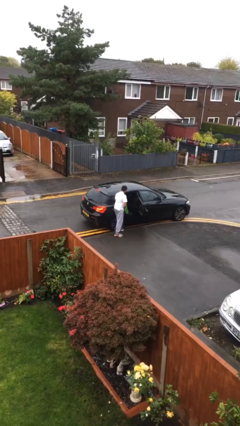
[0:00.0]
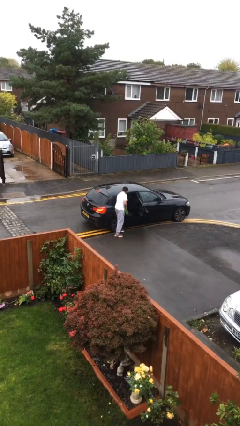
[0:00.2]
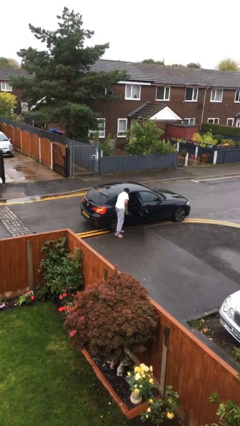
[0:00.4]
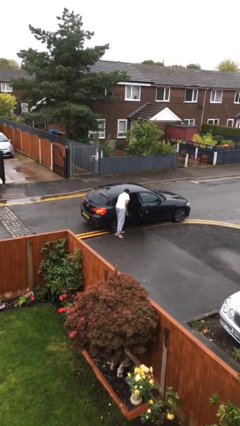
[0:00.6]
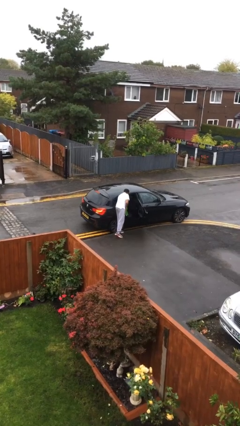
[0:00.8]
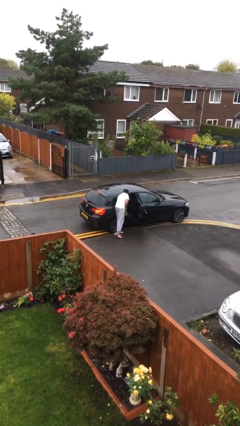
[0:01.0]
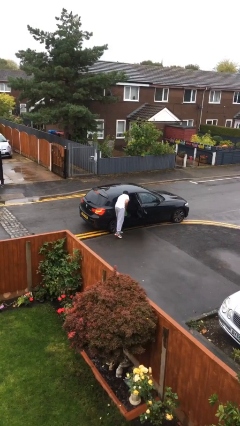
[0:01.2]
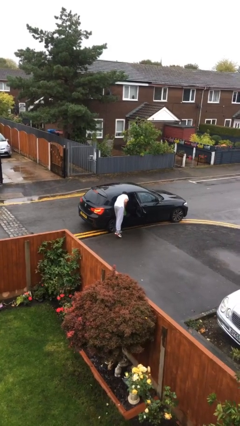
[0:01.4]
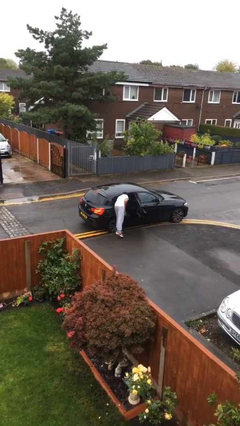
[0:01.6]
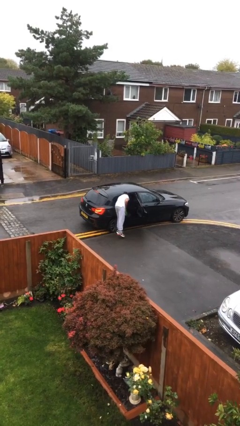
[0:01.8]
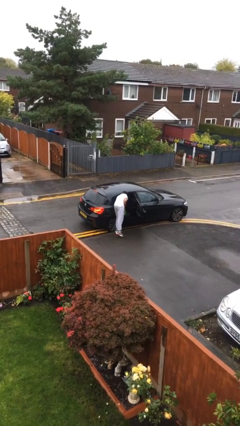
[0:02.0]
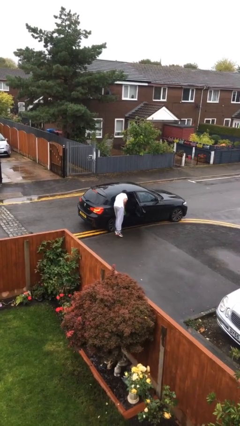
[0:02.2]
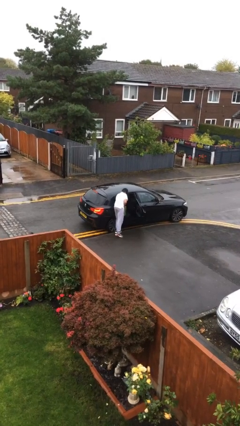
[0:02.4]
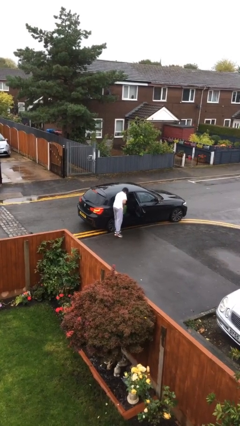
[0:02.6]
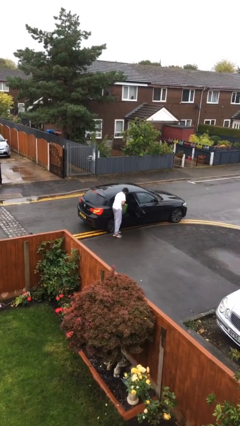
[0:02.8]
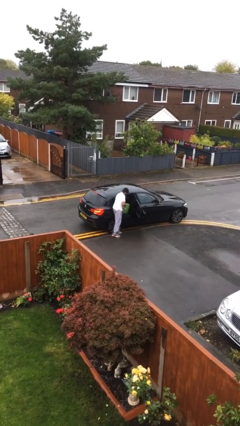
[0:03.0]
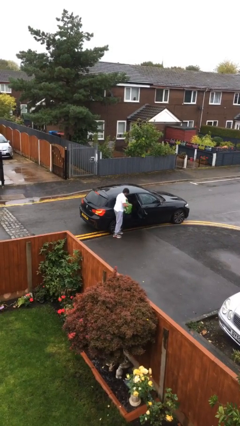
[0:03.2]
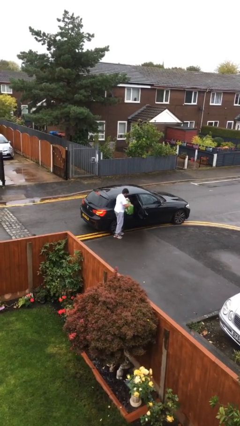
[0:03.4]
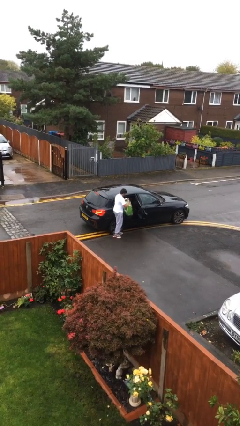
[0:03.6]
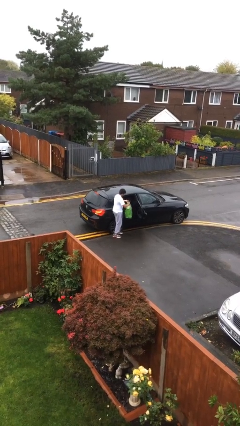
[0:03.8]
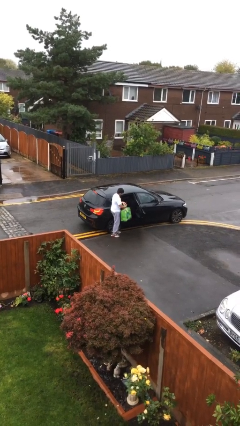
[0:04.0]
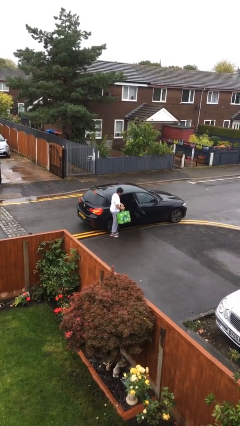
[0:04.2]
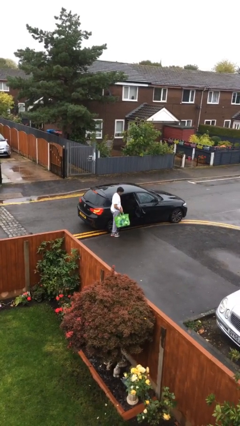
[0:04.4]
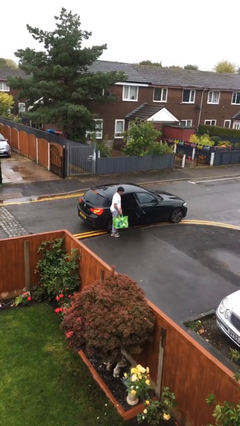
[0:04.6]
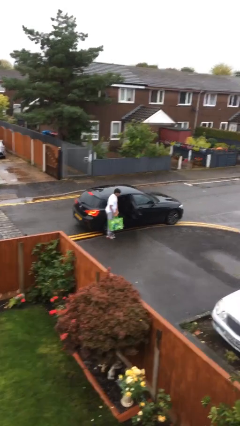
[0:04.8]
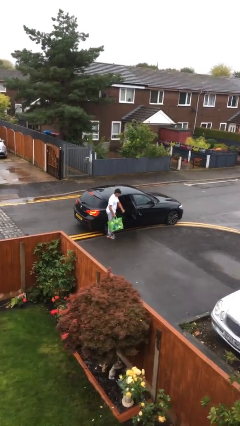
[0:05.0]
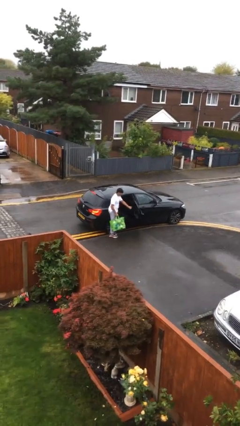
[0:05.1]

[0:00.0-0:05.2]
person unloads car

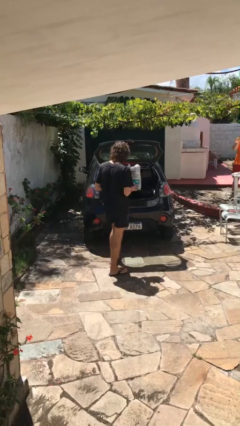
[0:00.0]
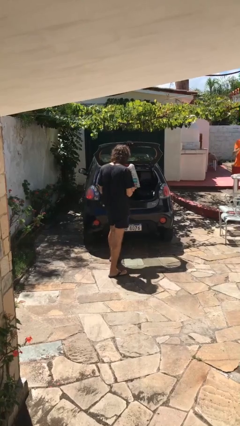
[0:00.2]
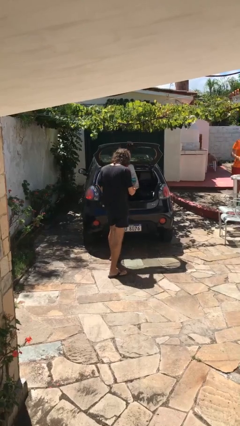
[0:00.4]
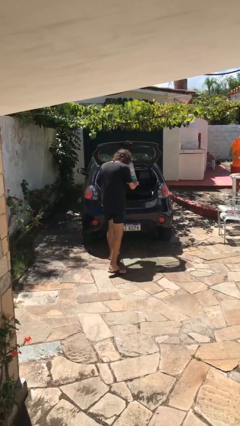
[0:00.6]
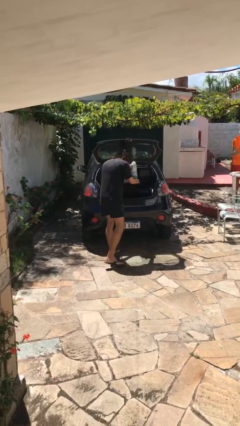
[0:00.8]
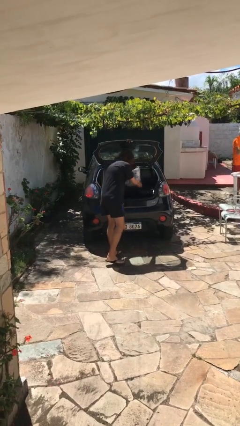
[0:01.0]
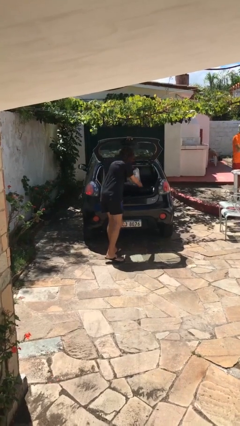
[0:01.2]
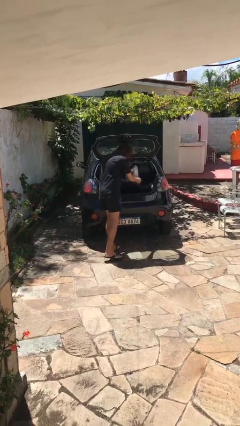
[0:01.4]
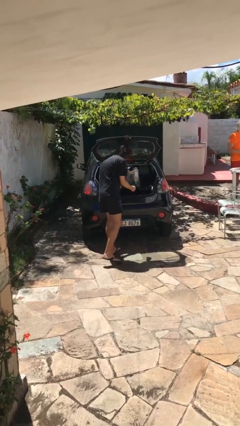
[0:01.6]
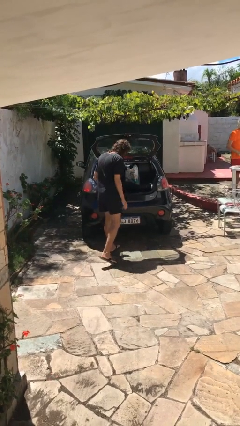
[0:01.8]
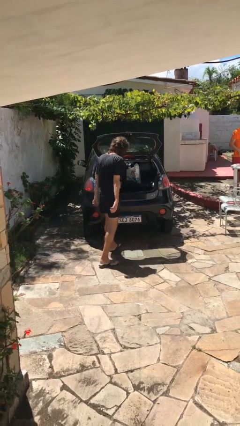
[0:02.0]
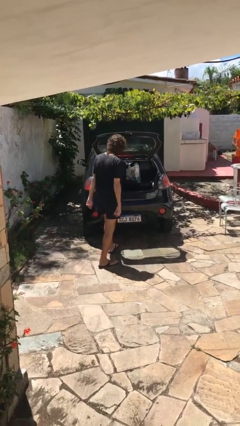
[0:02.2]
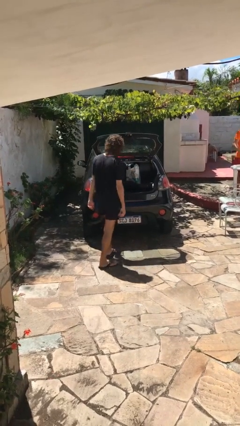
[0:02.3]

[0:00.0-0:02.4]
person loads car

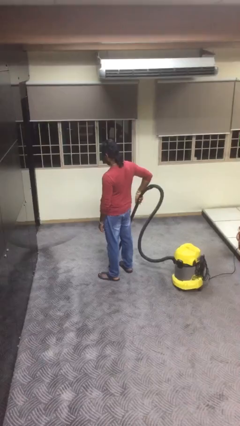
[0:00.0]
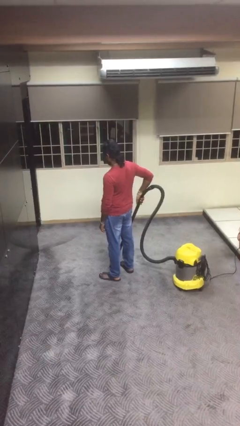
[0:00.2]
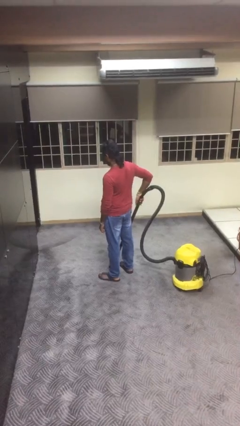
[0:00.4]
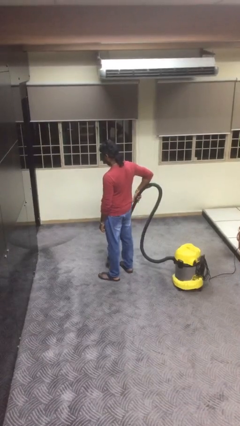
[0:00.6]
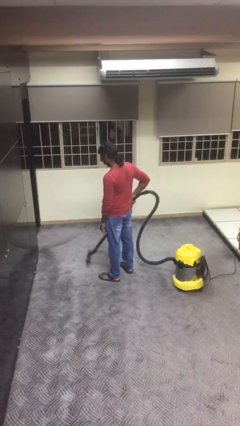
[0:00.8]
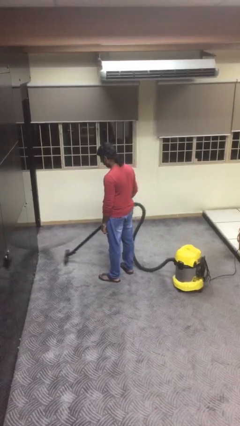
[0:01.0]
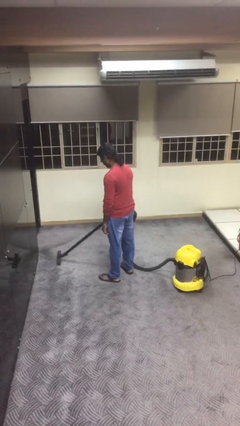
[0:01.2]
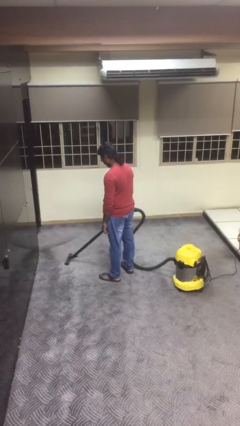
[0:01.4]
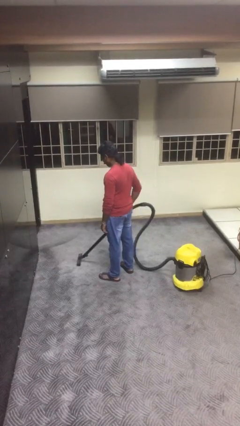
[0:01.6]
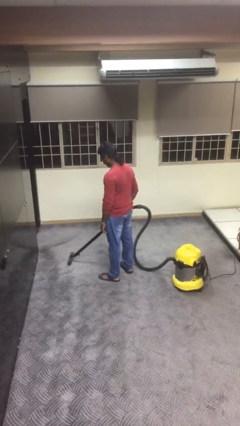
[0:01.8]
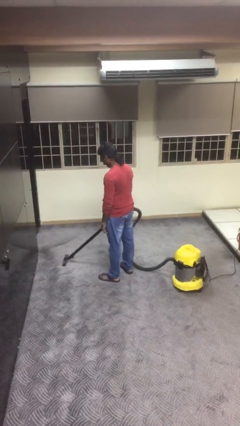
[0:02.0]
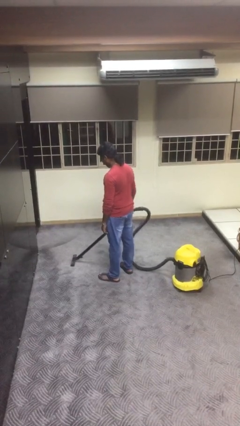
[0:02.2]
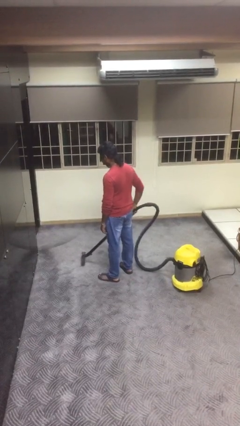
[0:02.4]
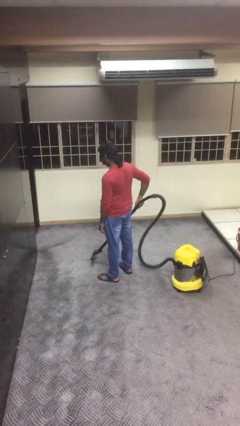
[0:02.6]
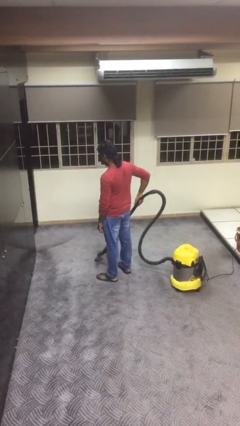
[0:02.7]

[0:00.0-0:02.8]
person vacuums carpet

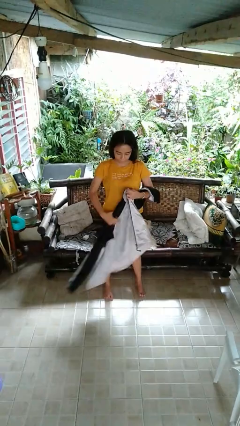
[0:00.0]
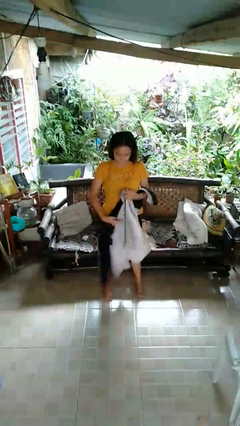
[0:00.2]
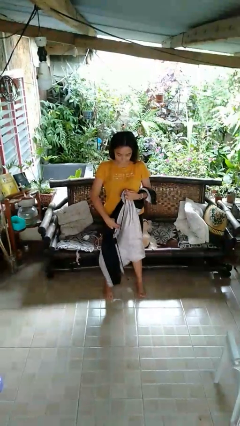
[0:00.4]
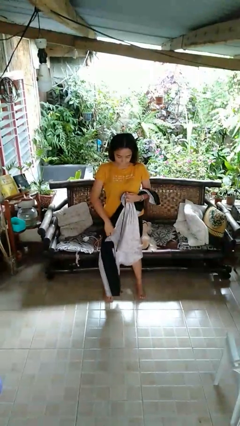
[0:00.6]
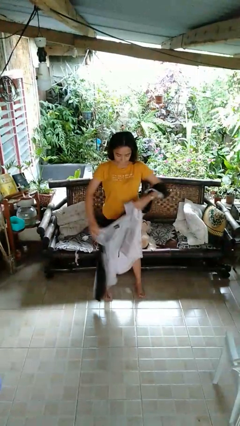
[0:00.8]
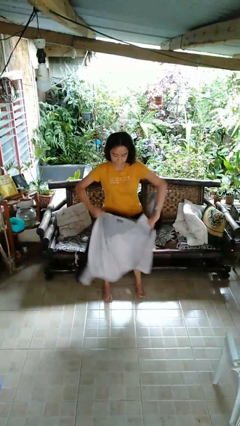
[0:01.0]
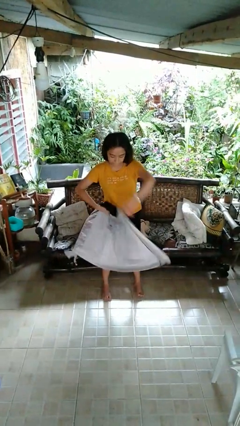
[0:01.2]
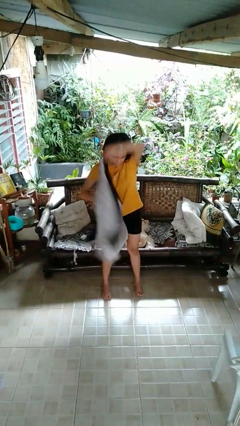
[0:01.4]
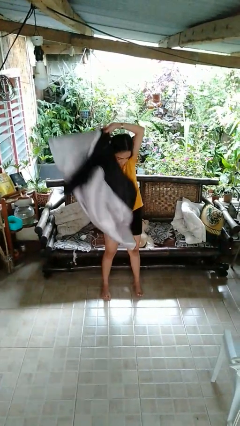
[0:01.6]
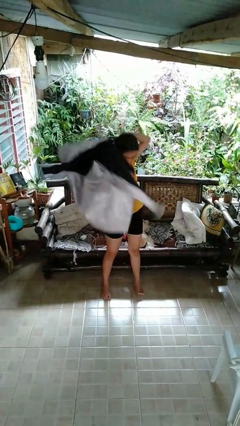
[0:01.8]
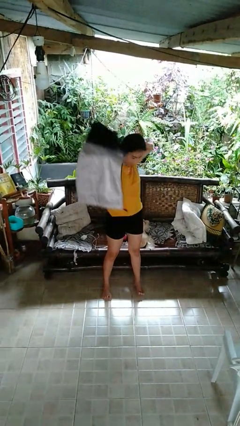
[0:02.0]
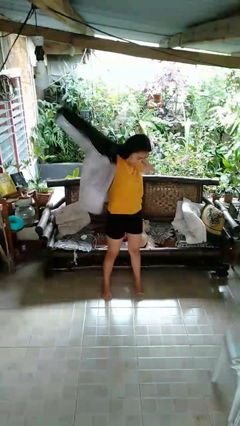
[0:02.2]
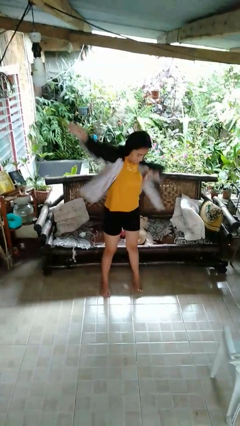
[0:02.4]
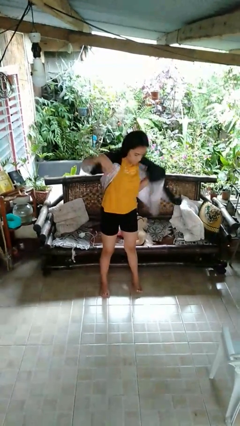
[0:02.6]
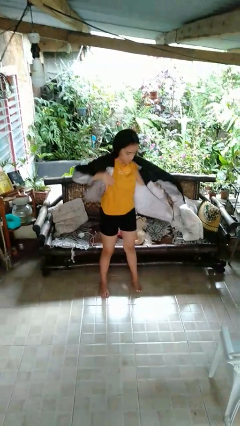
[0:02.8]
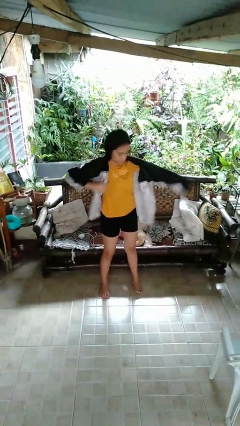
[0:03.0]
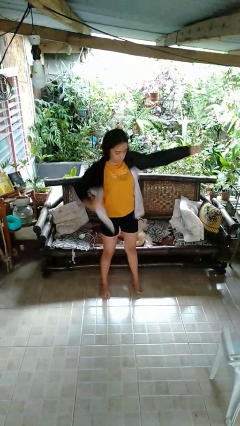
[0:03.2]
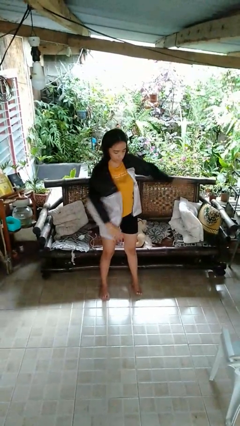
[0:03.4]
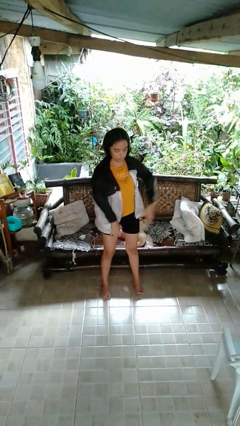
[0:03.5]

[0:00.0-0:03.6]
person puts on jacket

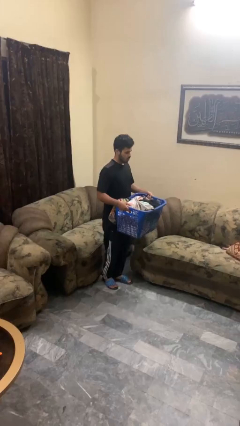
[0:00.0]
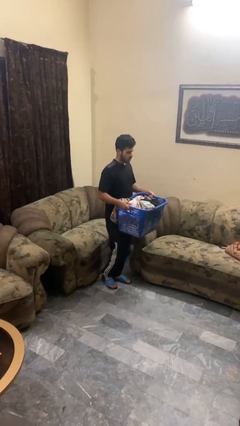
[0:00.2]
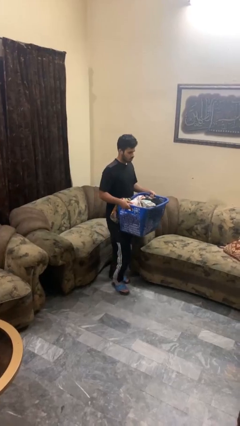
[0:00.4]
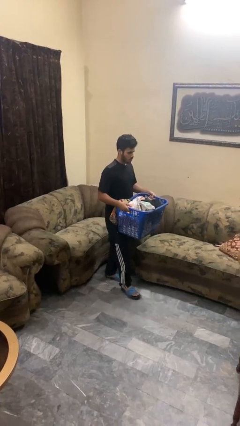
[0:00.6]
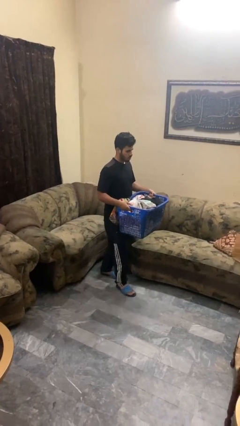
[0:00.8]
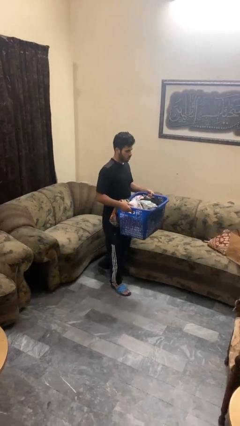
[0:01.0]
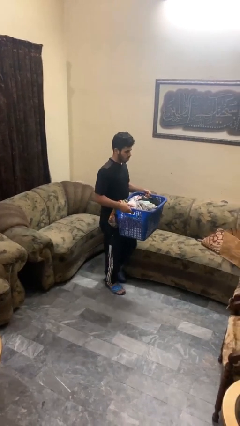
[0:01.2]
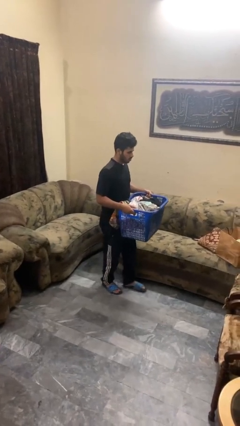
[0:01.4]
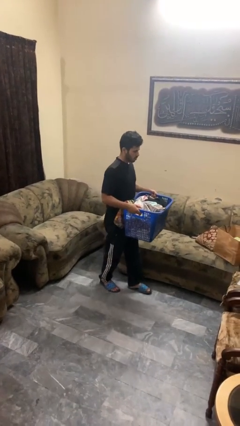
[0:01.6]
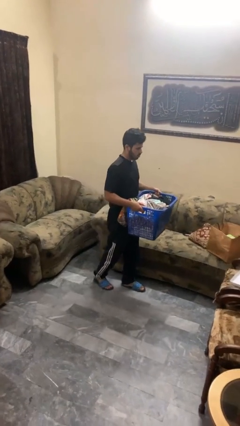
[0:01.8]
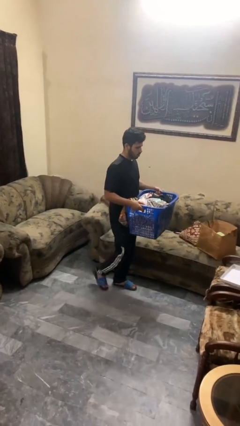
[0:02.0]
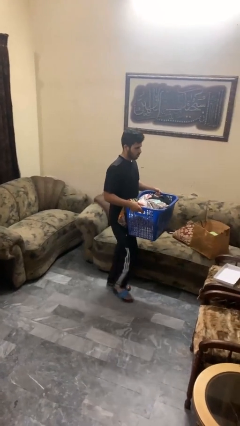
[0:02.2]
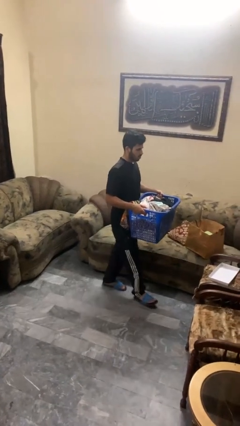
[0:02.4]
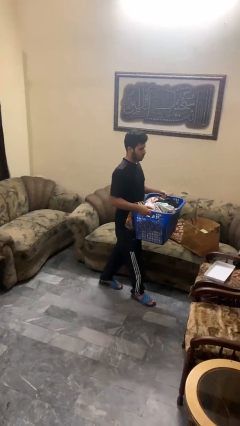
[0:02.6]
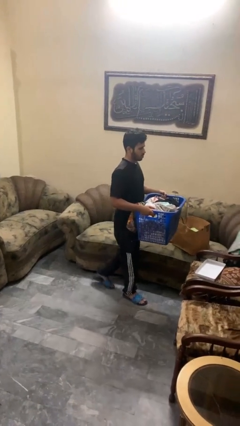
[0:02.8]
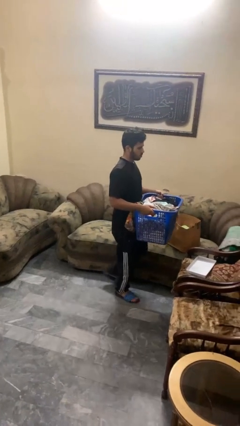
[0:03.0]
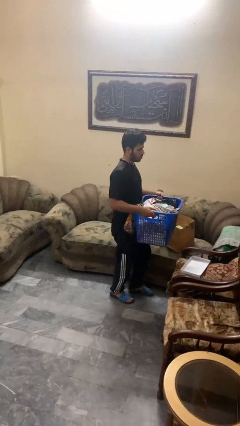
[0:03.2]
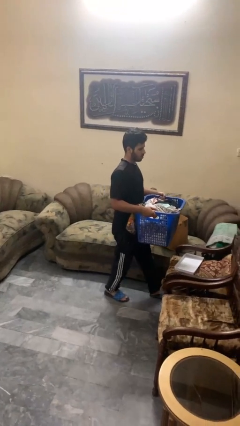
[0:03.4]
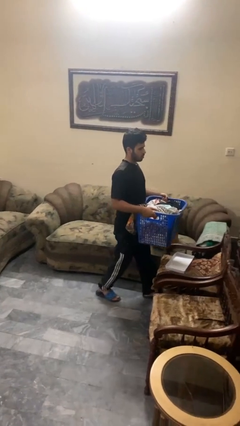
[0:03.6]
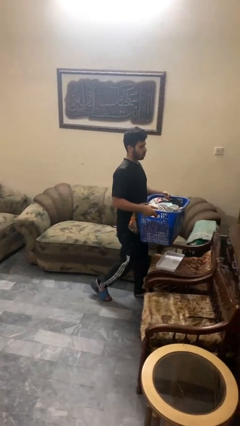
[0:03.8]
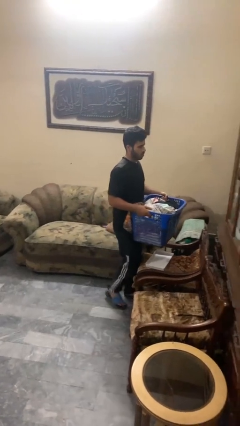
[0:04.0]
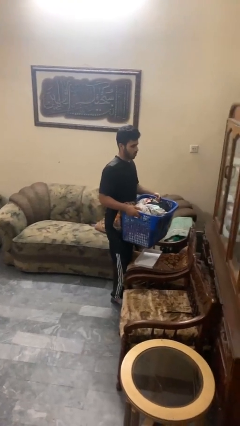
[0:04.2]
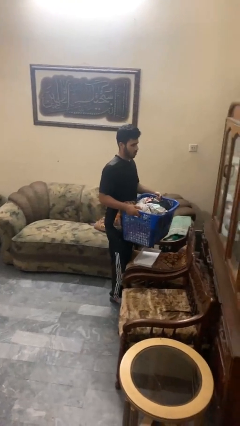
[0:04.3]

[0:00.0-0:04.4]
person carries laundry basket
